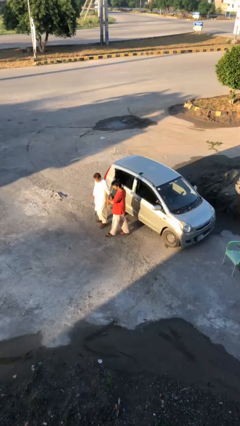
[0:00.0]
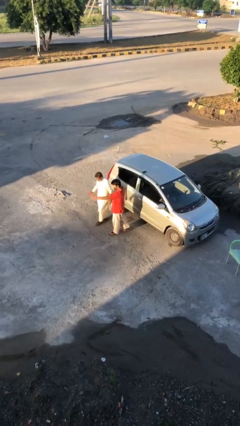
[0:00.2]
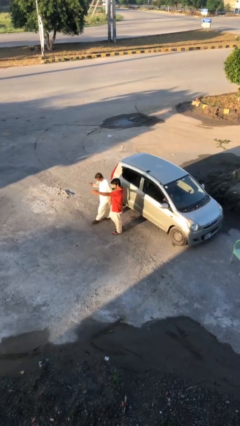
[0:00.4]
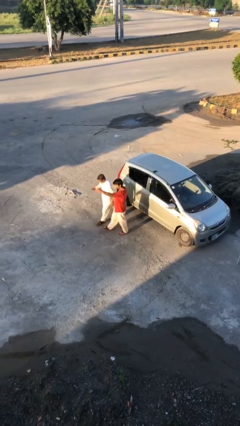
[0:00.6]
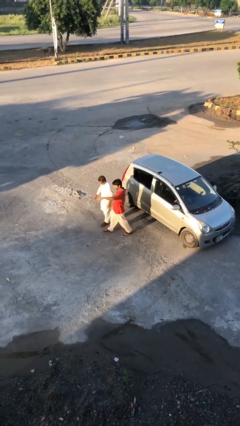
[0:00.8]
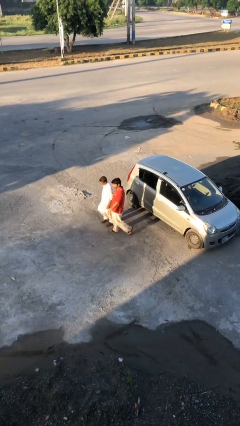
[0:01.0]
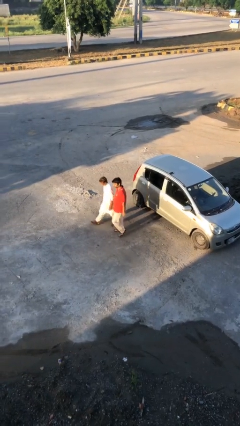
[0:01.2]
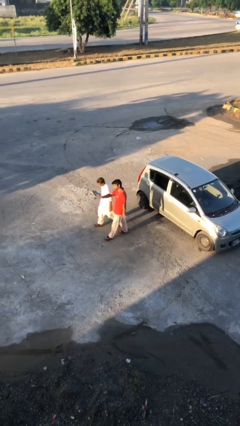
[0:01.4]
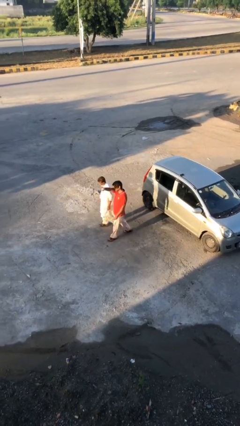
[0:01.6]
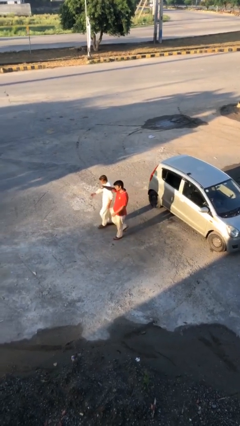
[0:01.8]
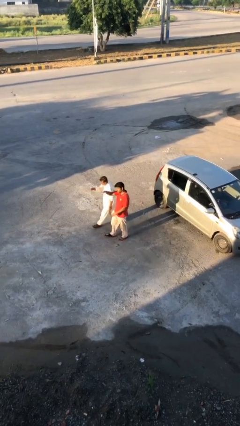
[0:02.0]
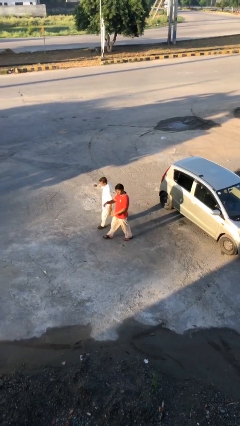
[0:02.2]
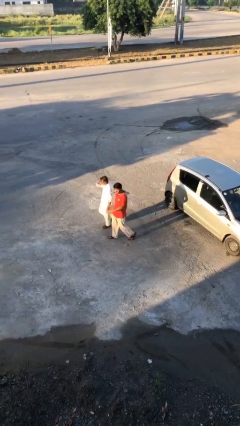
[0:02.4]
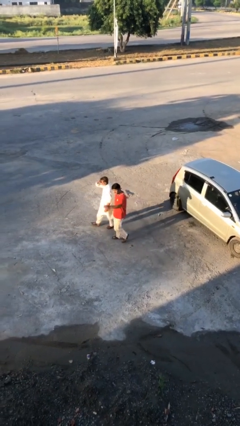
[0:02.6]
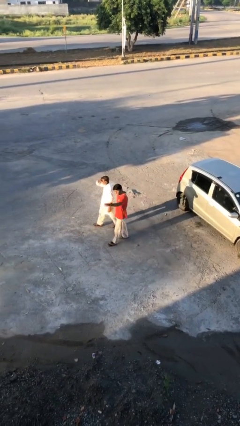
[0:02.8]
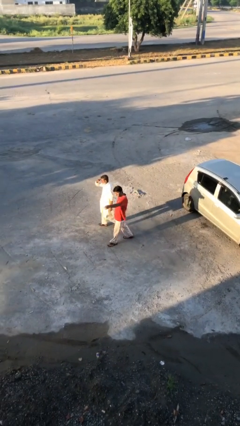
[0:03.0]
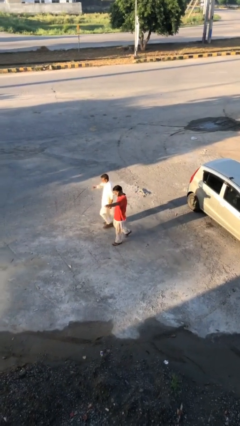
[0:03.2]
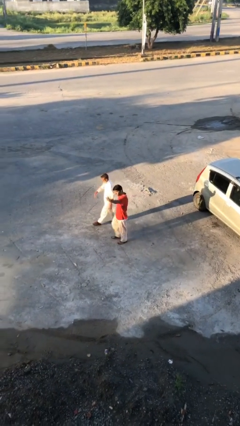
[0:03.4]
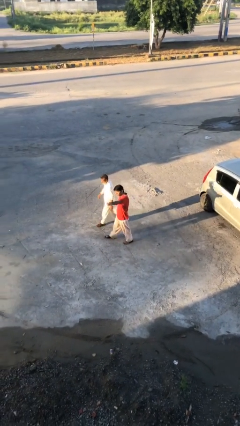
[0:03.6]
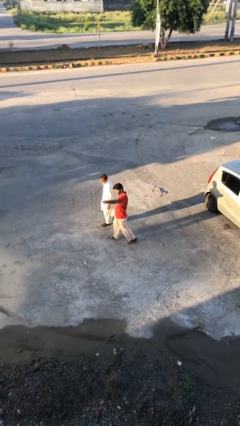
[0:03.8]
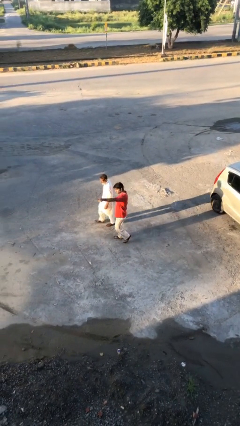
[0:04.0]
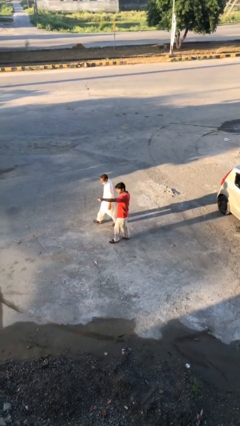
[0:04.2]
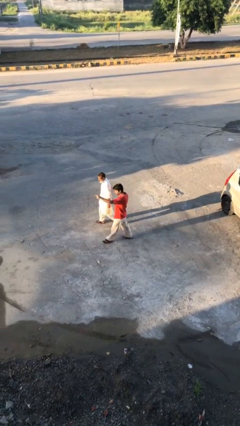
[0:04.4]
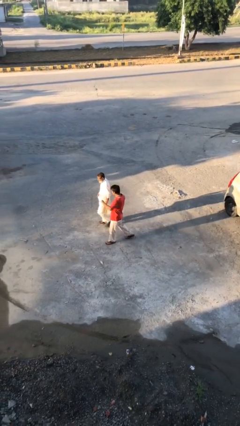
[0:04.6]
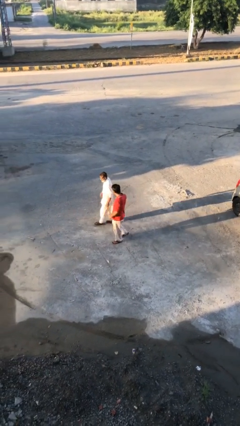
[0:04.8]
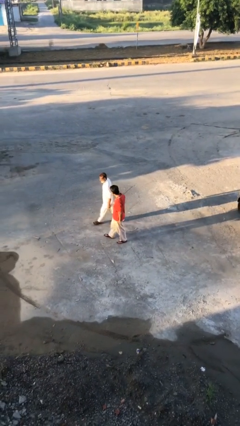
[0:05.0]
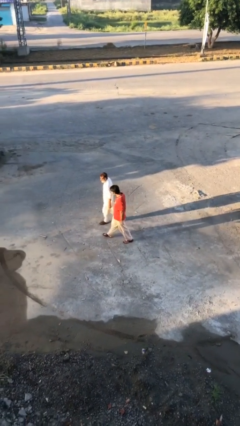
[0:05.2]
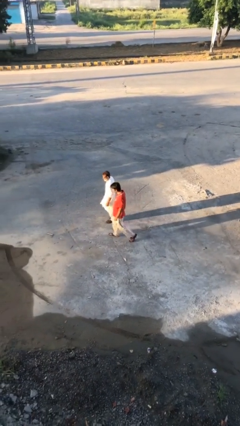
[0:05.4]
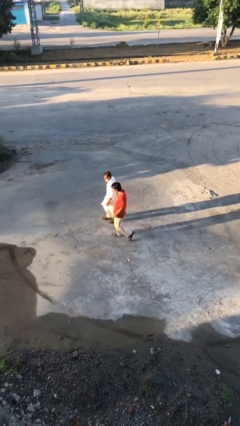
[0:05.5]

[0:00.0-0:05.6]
person talks to person

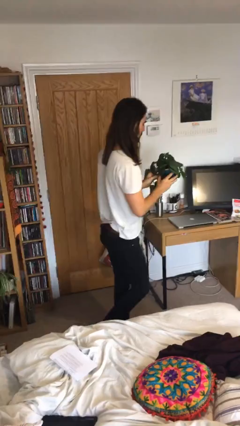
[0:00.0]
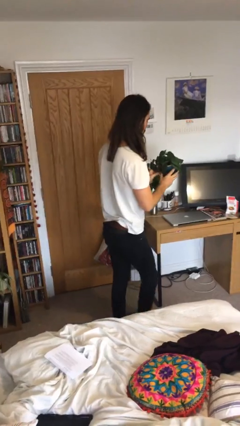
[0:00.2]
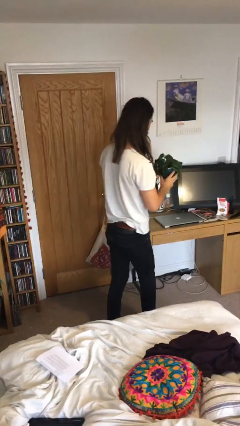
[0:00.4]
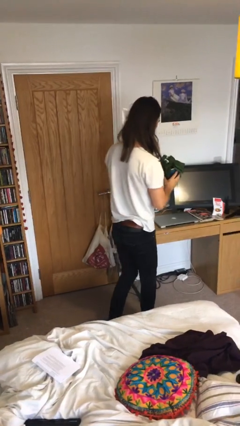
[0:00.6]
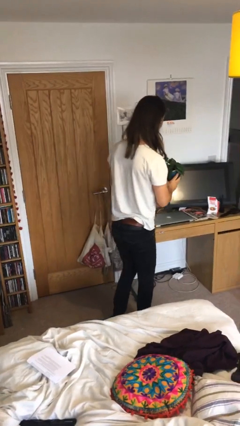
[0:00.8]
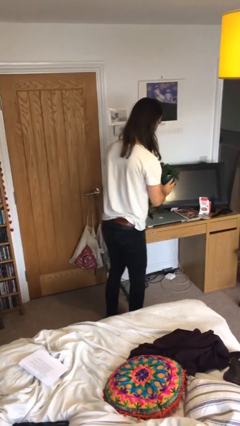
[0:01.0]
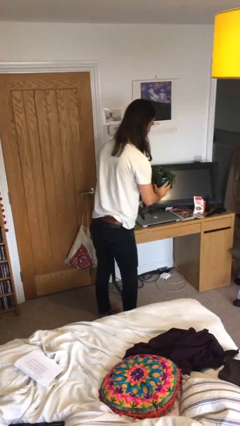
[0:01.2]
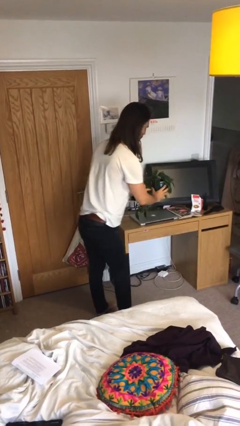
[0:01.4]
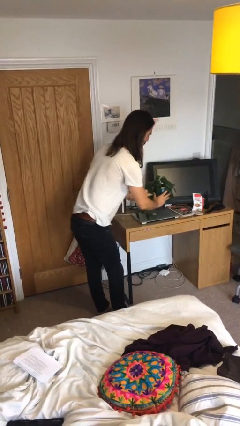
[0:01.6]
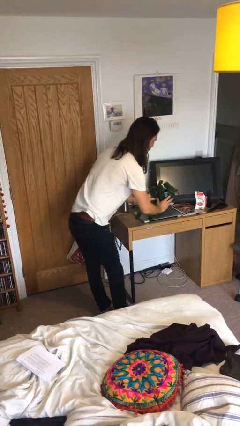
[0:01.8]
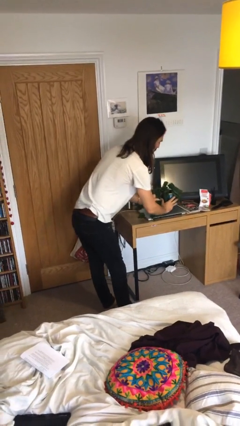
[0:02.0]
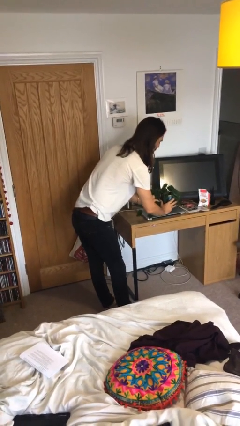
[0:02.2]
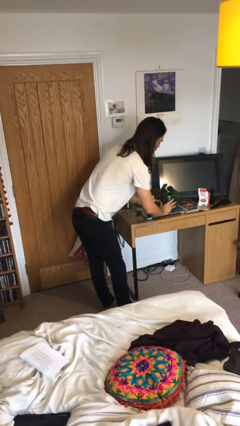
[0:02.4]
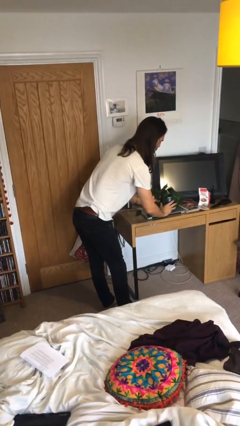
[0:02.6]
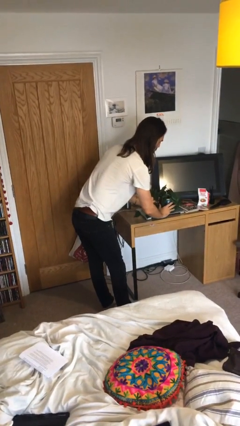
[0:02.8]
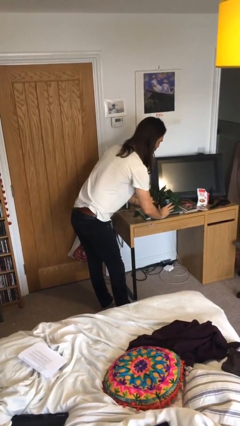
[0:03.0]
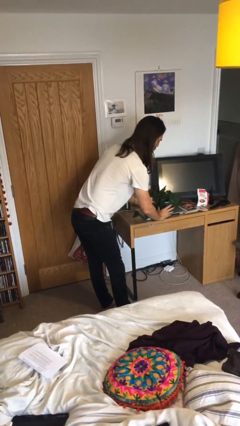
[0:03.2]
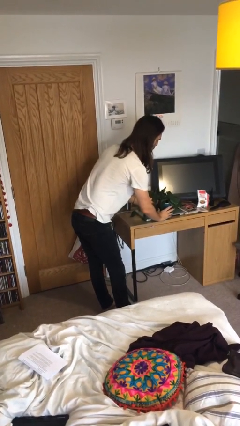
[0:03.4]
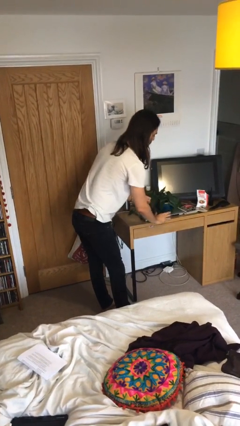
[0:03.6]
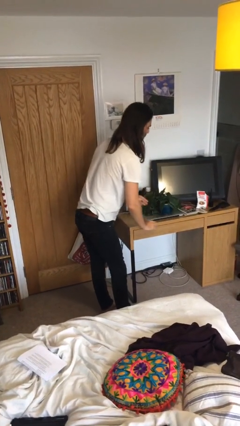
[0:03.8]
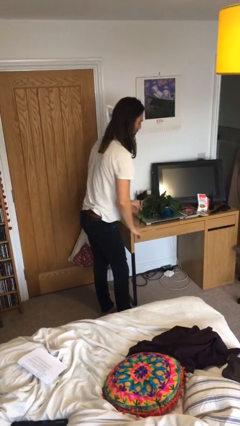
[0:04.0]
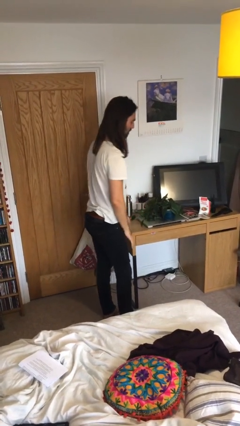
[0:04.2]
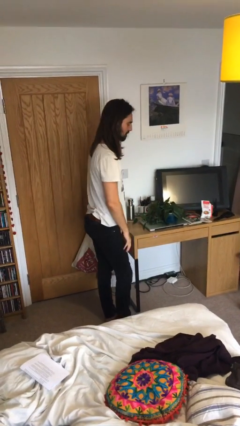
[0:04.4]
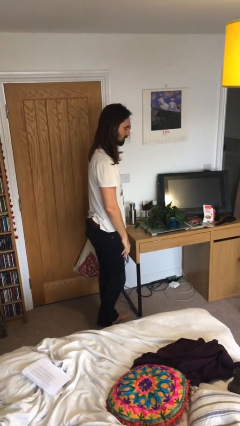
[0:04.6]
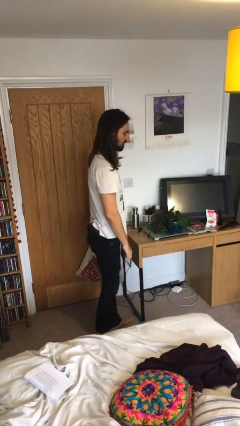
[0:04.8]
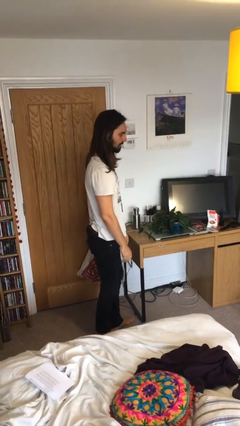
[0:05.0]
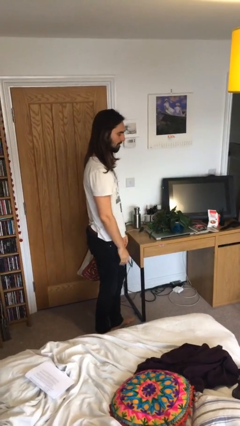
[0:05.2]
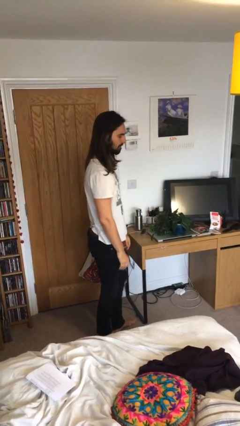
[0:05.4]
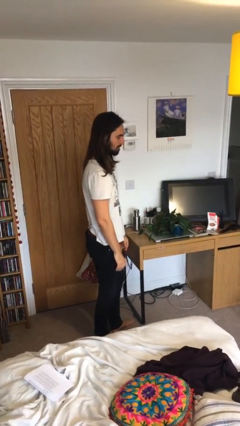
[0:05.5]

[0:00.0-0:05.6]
person puts down object on table

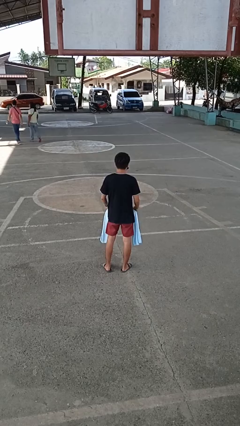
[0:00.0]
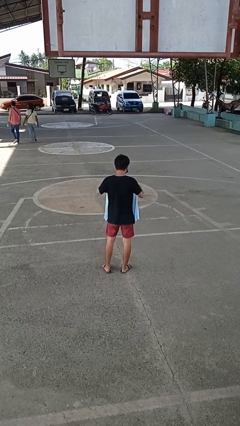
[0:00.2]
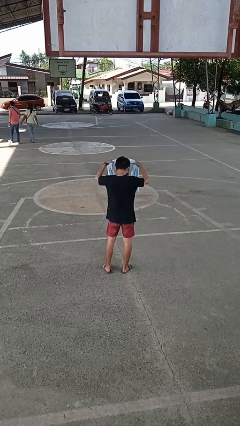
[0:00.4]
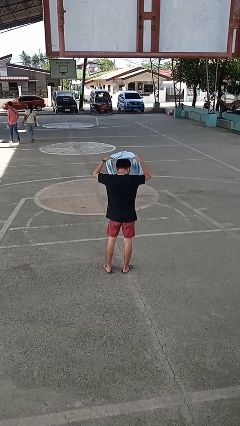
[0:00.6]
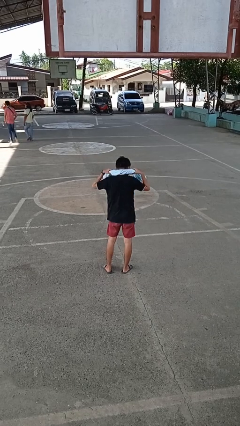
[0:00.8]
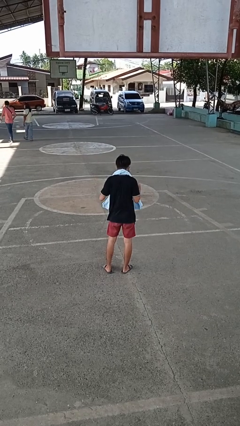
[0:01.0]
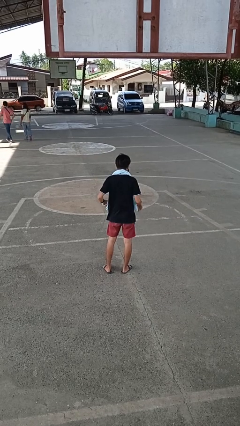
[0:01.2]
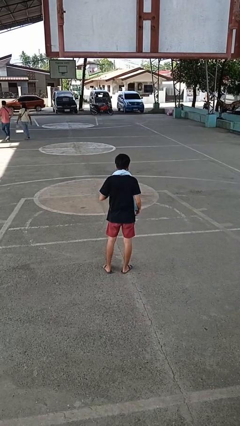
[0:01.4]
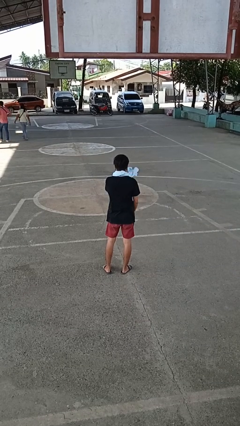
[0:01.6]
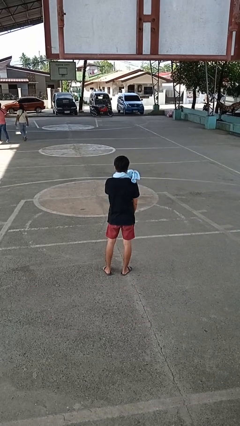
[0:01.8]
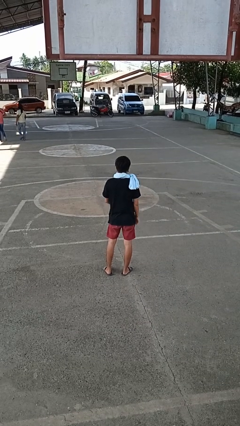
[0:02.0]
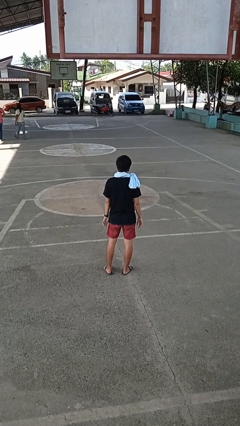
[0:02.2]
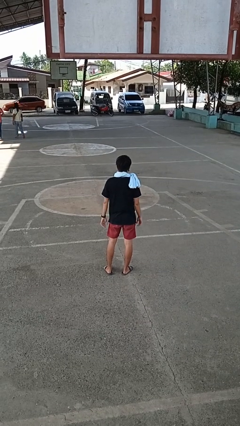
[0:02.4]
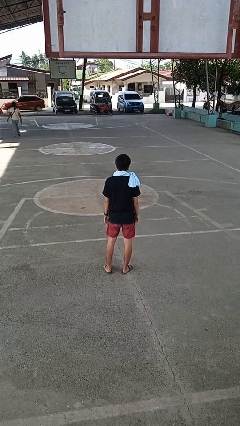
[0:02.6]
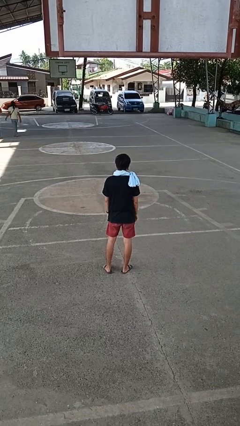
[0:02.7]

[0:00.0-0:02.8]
person puts on scarf

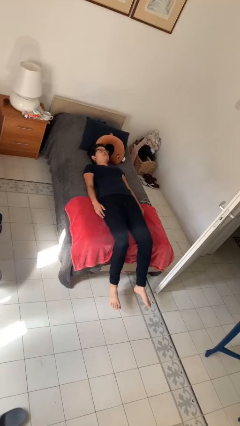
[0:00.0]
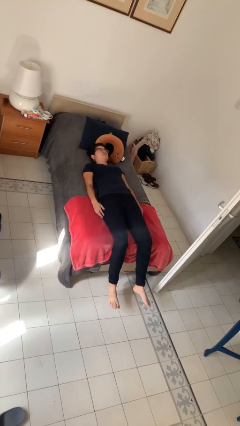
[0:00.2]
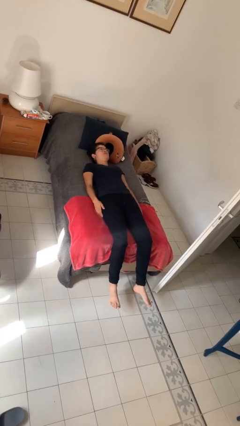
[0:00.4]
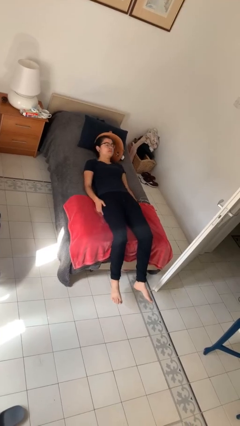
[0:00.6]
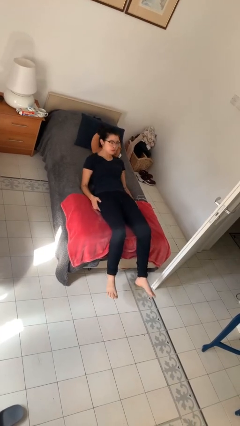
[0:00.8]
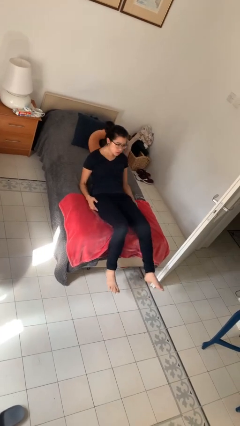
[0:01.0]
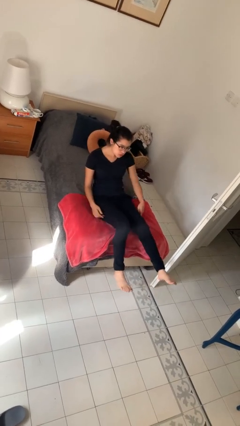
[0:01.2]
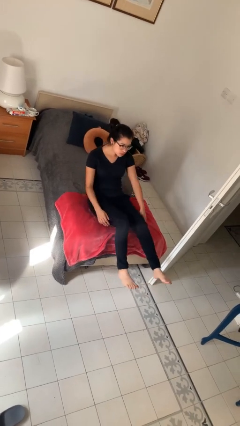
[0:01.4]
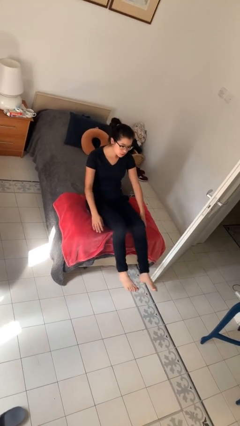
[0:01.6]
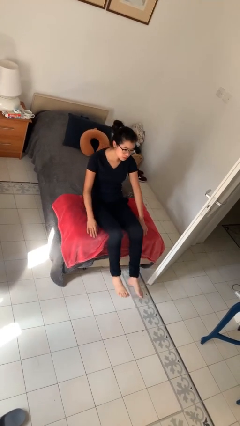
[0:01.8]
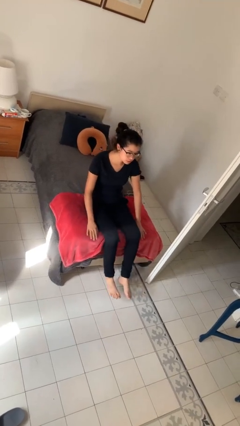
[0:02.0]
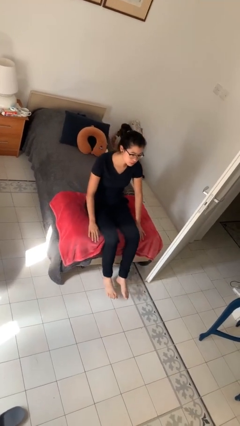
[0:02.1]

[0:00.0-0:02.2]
person stands up

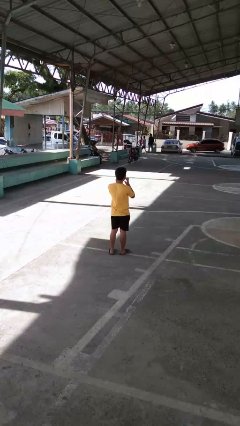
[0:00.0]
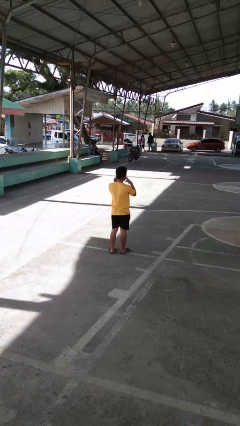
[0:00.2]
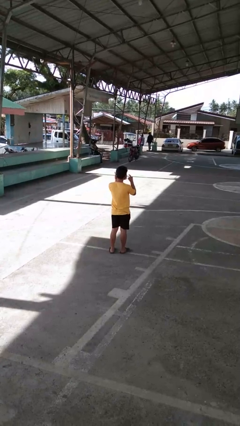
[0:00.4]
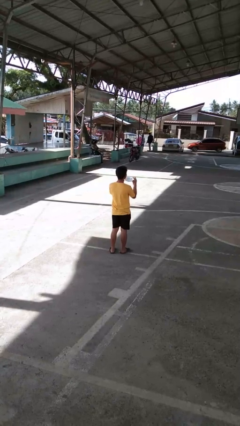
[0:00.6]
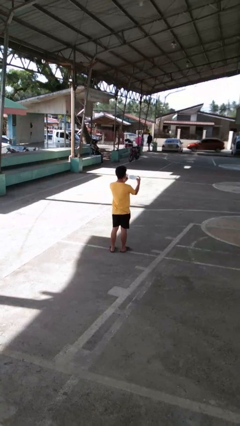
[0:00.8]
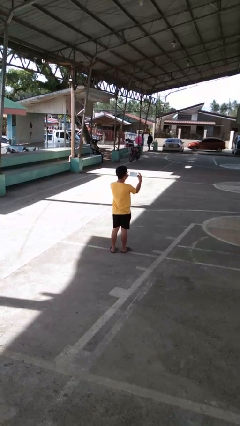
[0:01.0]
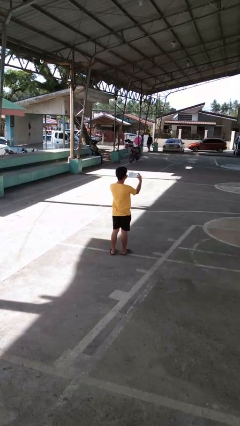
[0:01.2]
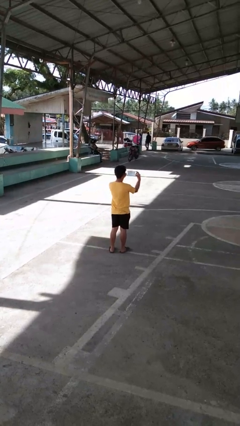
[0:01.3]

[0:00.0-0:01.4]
person takes off facemask
